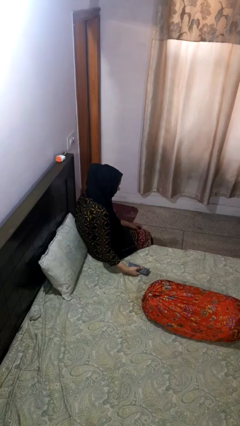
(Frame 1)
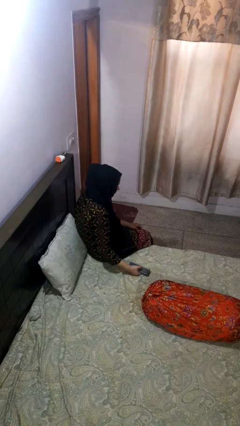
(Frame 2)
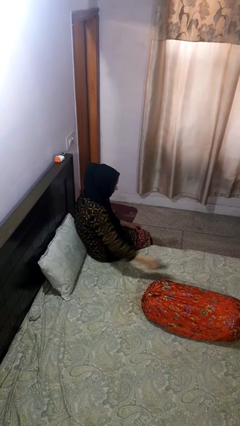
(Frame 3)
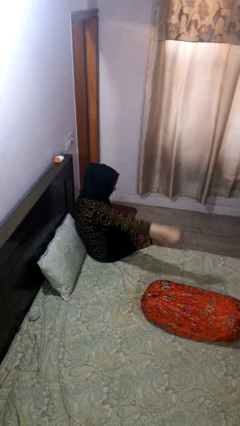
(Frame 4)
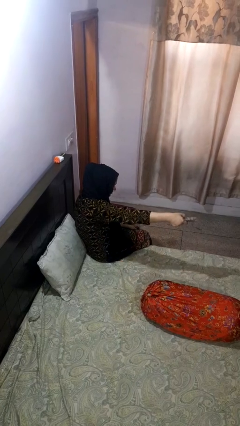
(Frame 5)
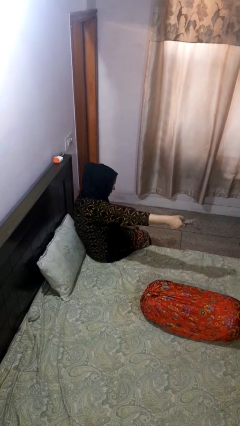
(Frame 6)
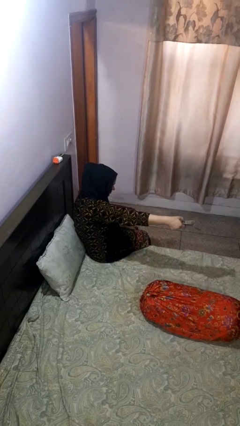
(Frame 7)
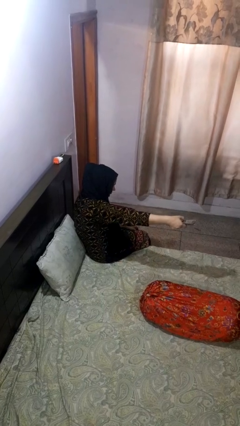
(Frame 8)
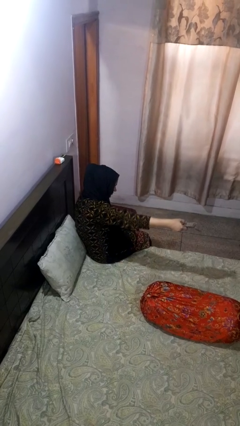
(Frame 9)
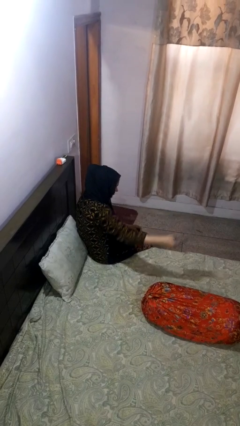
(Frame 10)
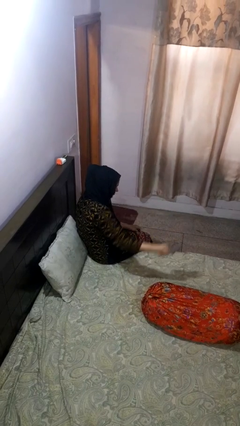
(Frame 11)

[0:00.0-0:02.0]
person uses television remote

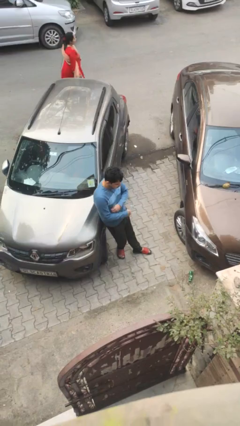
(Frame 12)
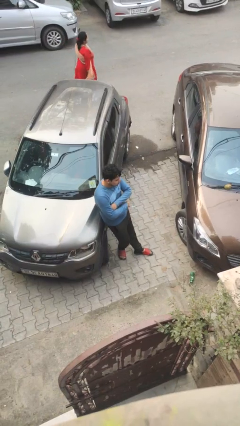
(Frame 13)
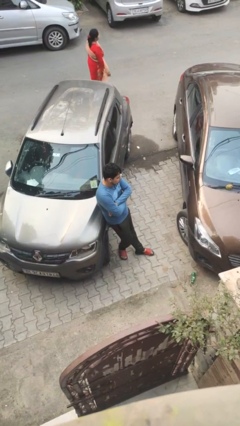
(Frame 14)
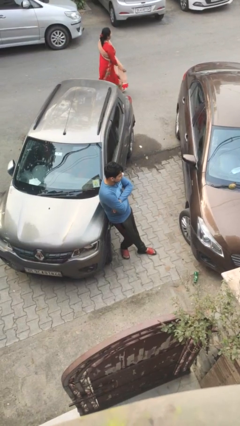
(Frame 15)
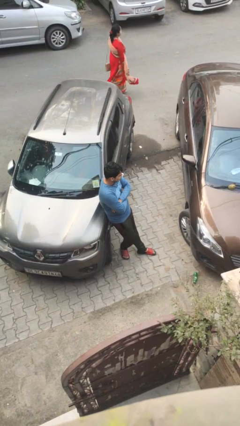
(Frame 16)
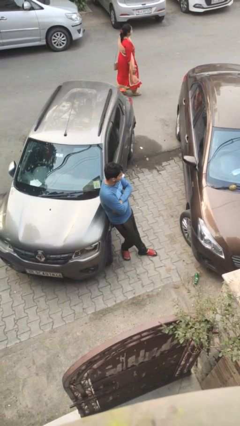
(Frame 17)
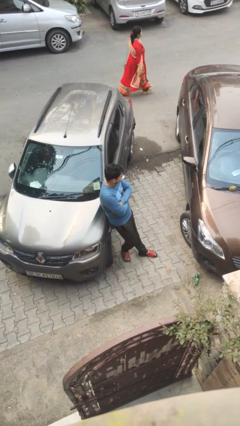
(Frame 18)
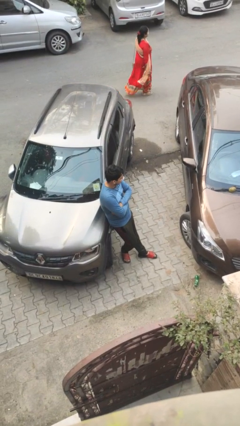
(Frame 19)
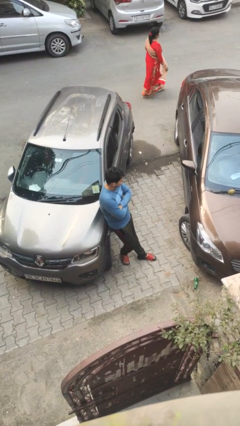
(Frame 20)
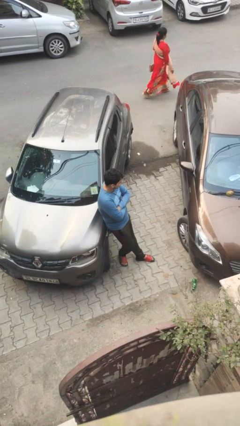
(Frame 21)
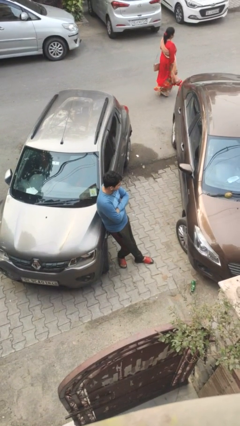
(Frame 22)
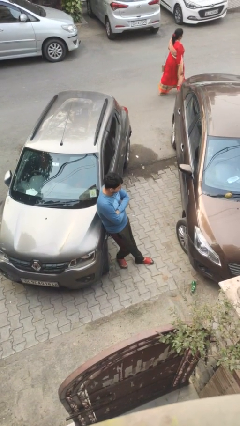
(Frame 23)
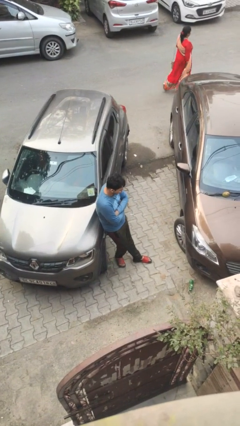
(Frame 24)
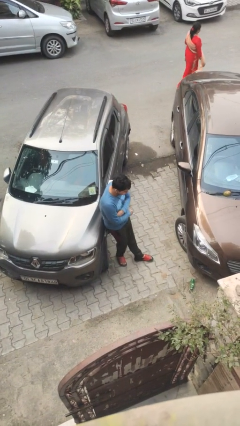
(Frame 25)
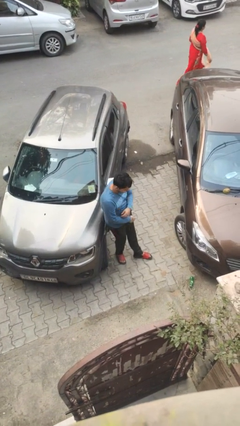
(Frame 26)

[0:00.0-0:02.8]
person leans against car

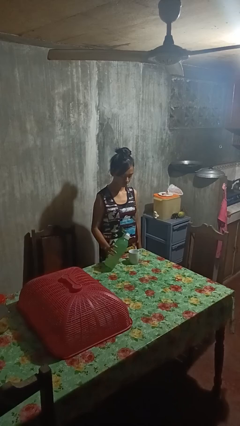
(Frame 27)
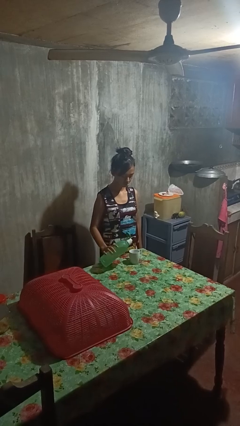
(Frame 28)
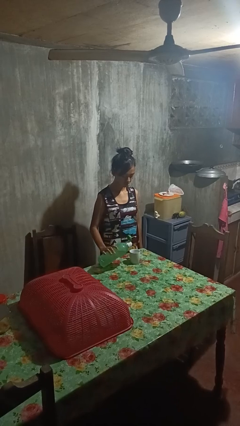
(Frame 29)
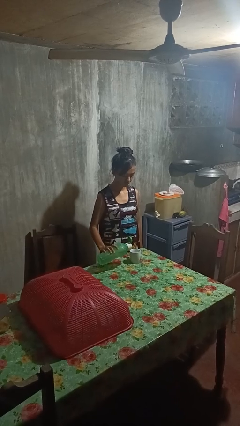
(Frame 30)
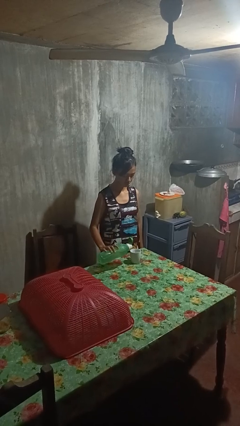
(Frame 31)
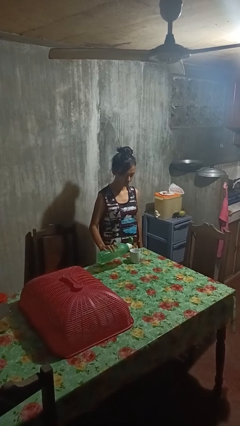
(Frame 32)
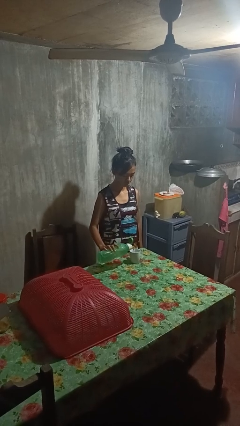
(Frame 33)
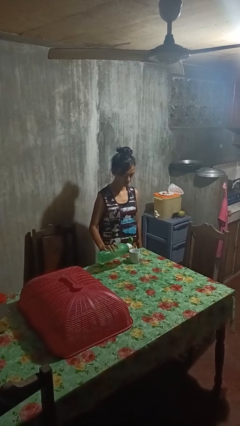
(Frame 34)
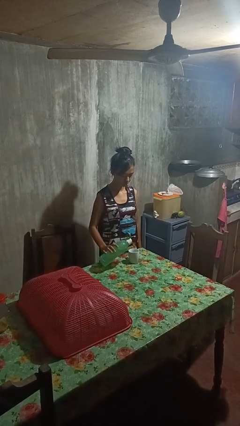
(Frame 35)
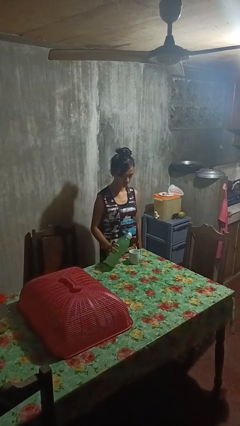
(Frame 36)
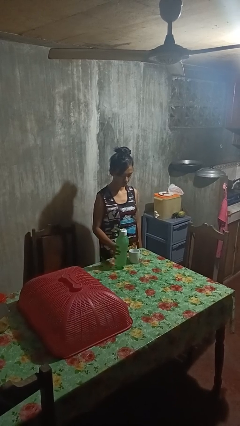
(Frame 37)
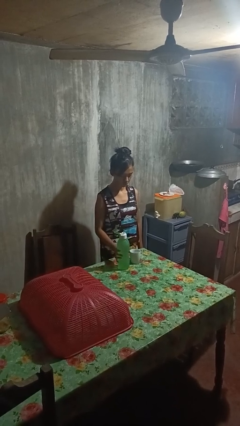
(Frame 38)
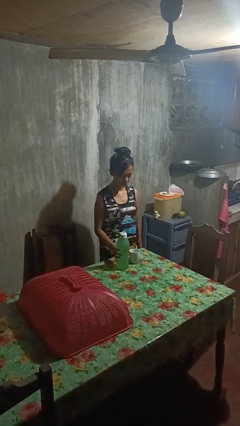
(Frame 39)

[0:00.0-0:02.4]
person pours liquid into cup

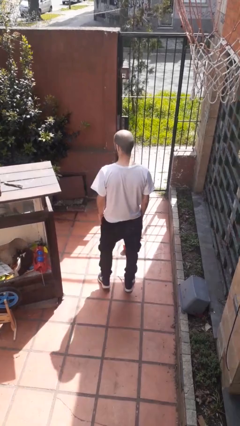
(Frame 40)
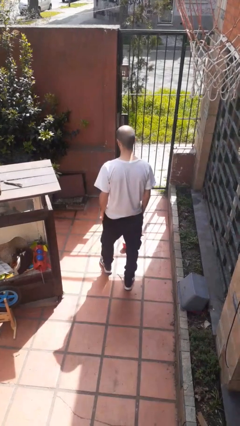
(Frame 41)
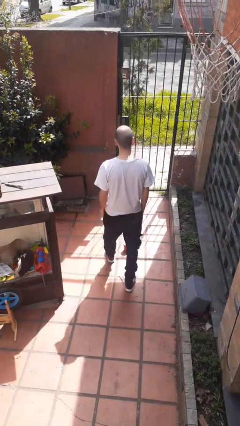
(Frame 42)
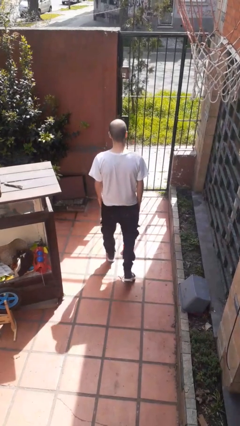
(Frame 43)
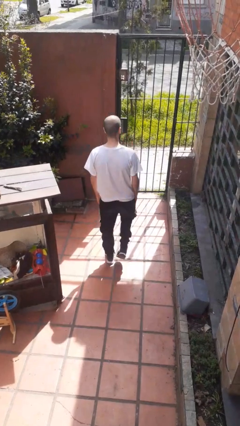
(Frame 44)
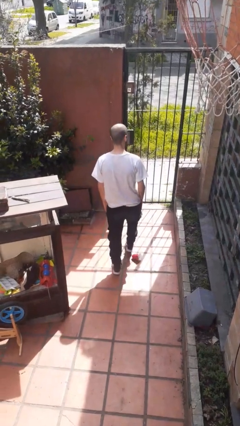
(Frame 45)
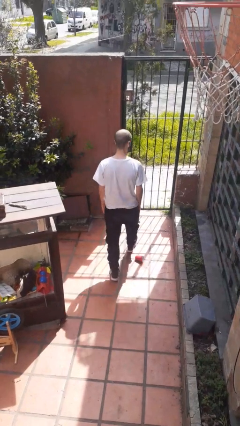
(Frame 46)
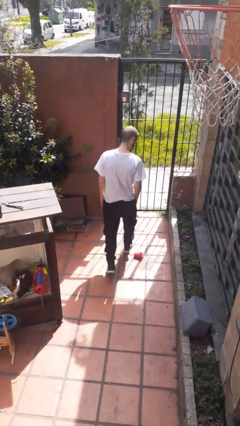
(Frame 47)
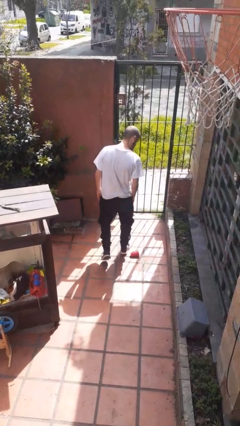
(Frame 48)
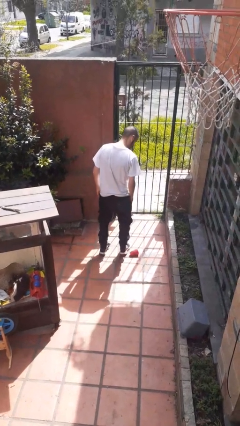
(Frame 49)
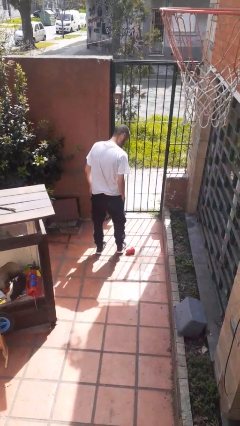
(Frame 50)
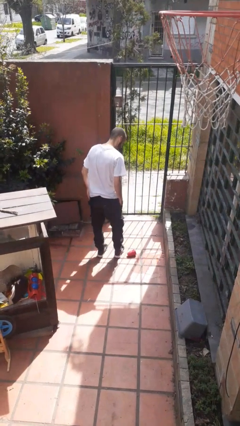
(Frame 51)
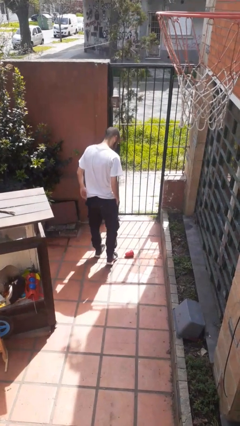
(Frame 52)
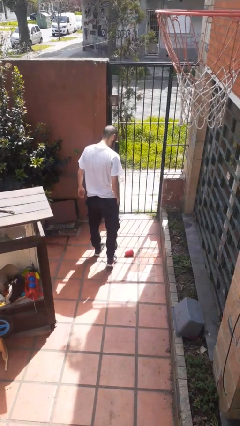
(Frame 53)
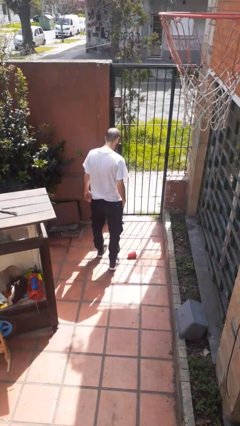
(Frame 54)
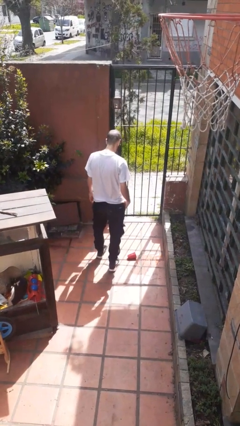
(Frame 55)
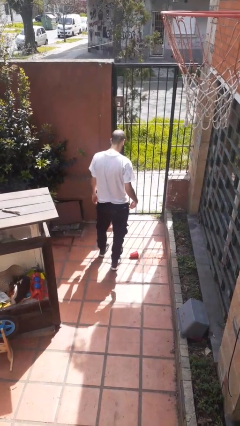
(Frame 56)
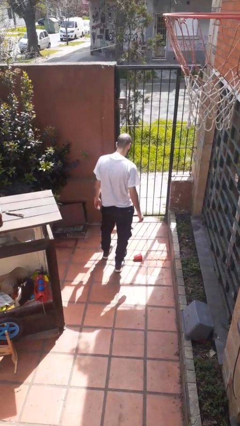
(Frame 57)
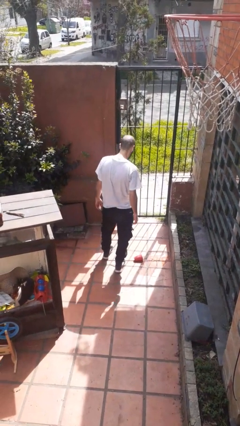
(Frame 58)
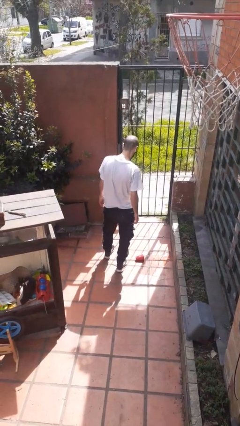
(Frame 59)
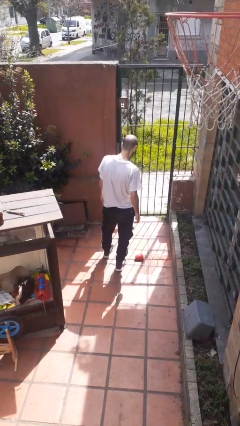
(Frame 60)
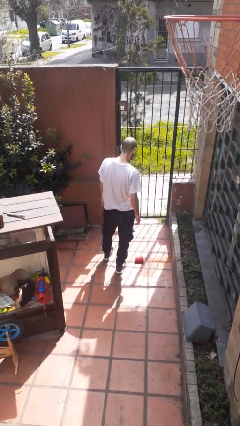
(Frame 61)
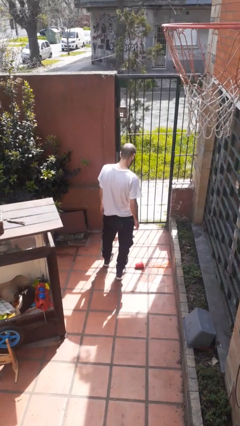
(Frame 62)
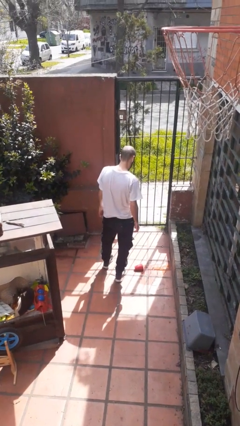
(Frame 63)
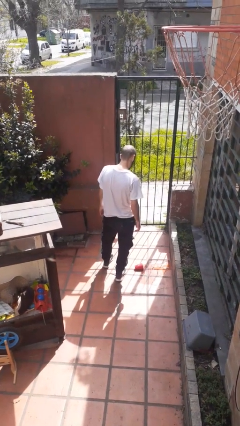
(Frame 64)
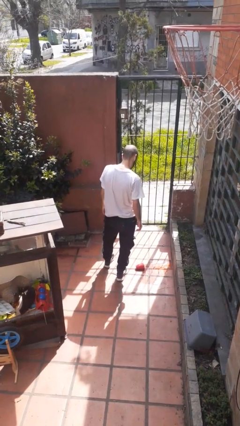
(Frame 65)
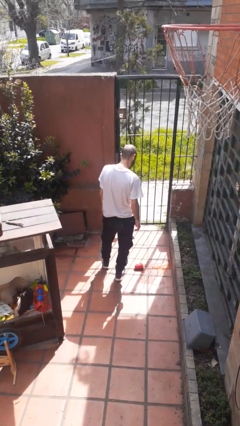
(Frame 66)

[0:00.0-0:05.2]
person spills on floor

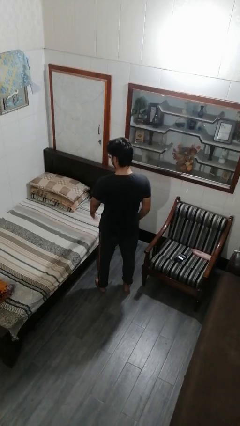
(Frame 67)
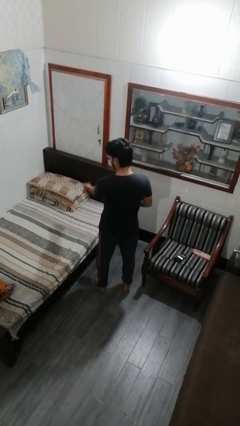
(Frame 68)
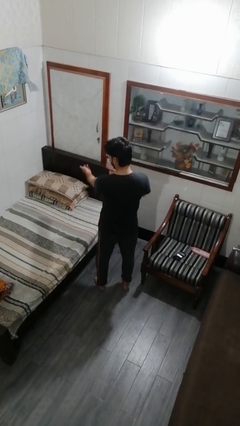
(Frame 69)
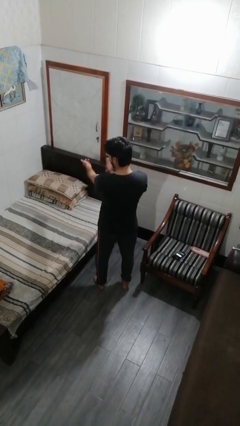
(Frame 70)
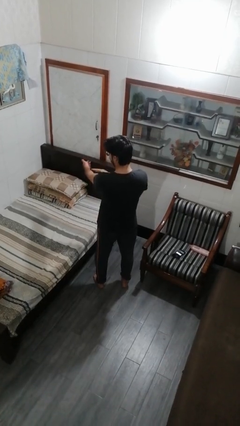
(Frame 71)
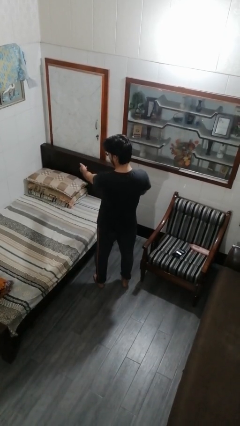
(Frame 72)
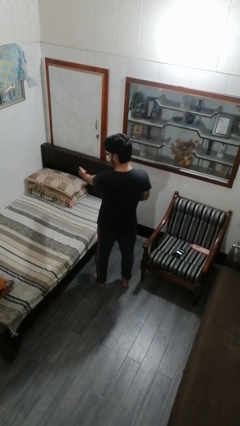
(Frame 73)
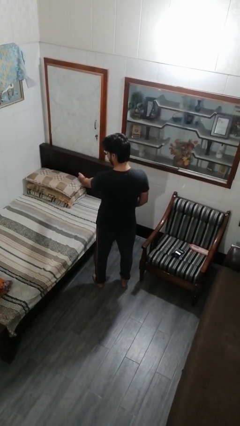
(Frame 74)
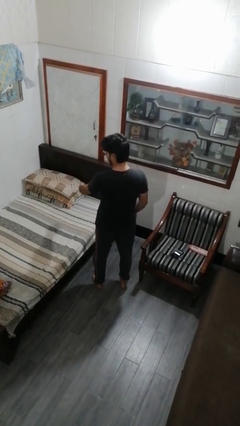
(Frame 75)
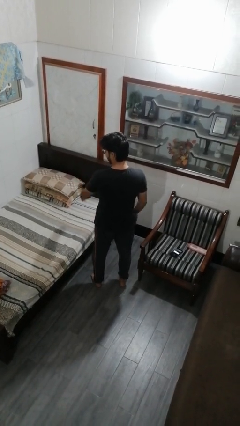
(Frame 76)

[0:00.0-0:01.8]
person swats bug

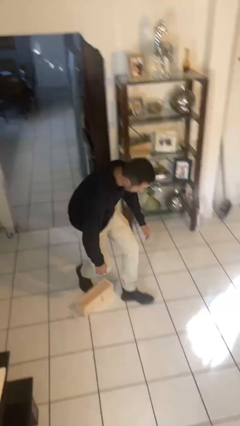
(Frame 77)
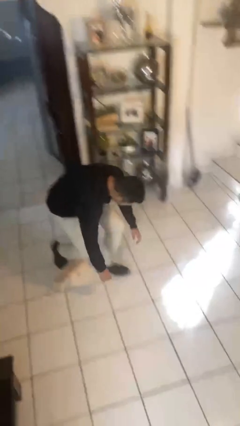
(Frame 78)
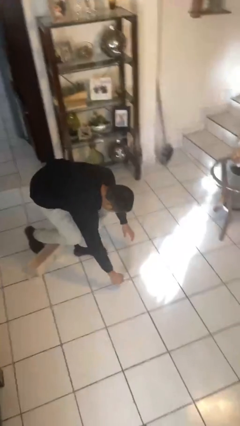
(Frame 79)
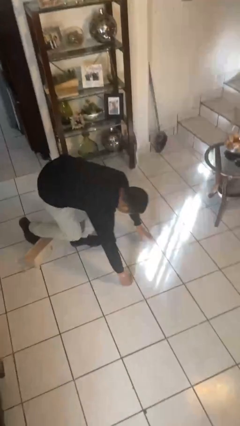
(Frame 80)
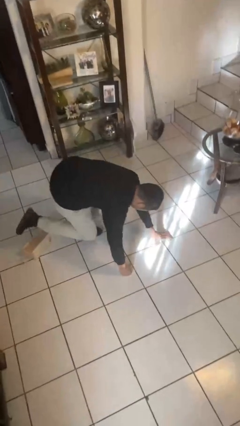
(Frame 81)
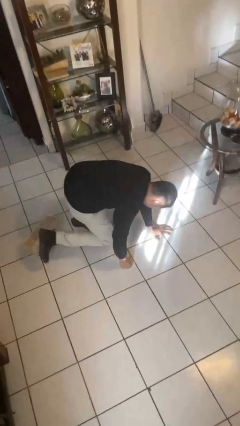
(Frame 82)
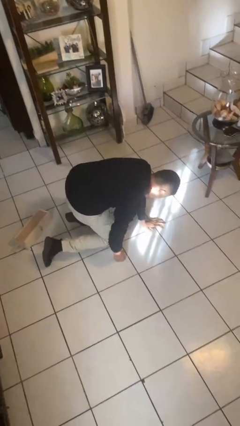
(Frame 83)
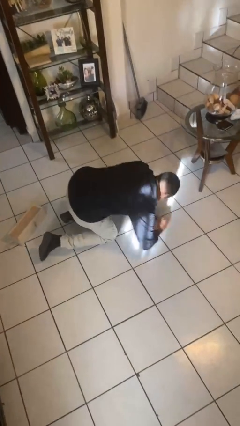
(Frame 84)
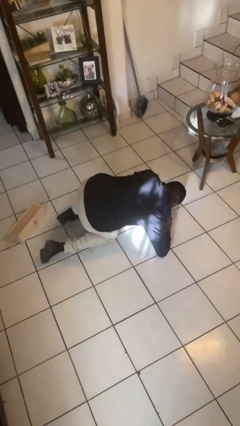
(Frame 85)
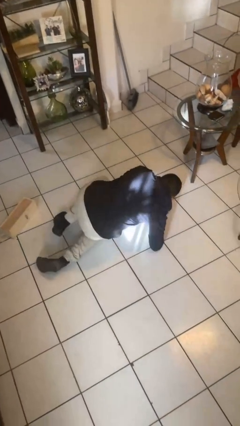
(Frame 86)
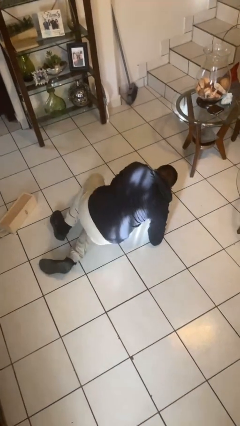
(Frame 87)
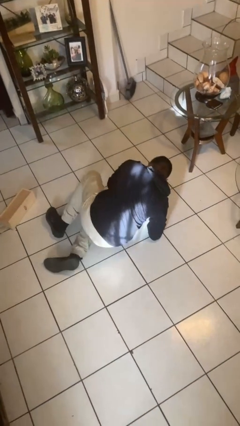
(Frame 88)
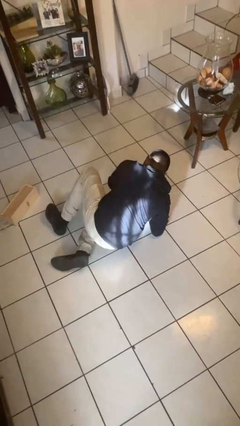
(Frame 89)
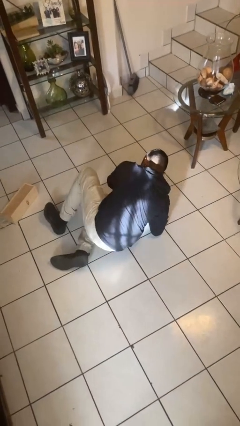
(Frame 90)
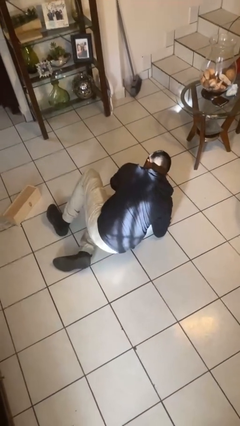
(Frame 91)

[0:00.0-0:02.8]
person lies down on floor

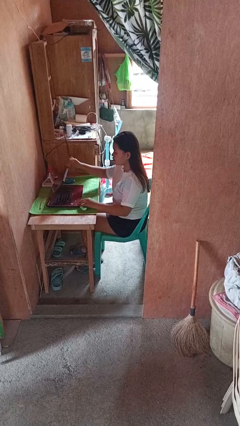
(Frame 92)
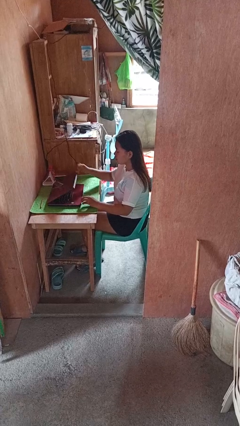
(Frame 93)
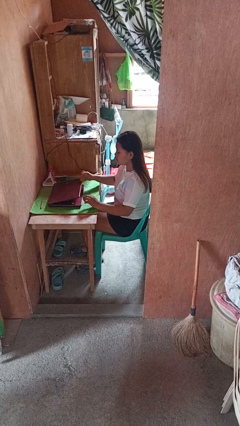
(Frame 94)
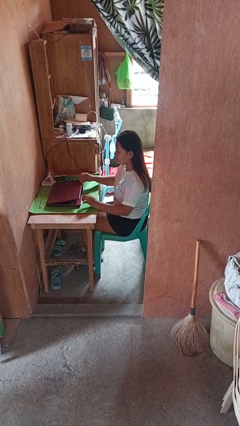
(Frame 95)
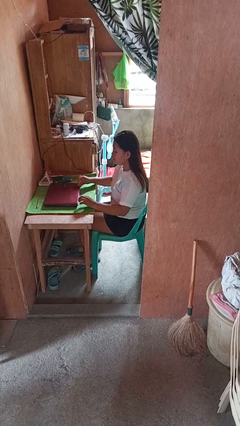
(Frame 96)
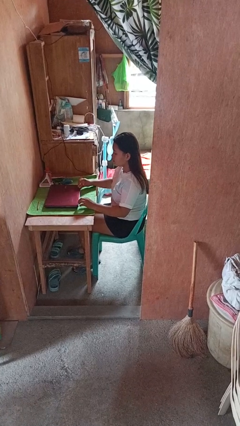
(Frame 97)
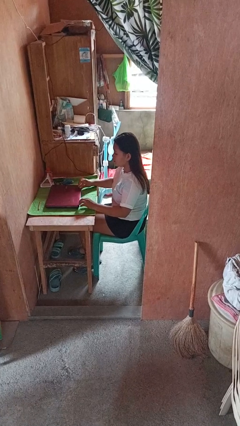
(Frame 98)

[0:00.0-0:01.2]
person closes laptop
